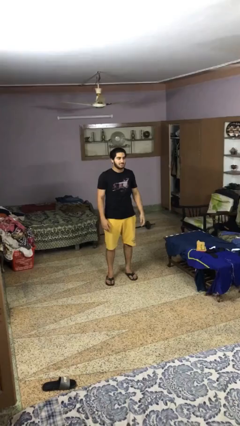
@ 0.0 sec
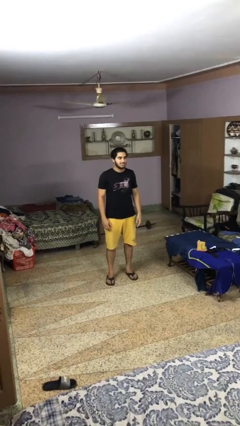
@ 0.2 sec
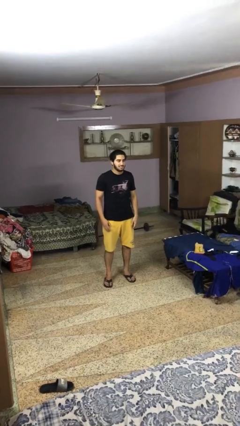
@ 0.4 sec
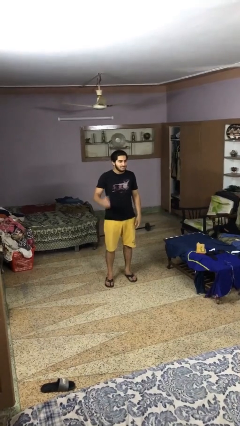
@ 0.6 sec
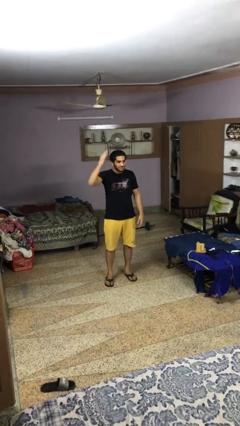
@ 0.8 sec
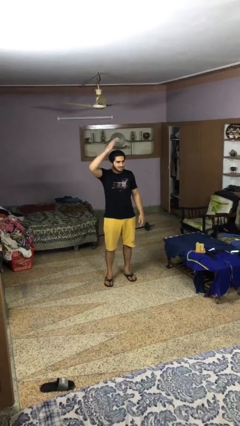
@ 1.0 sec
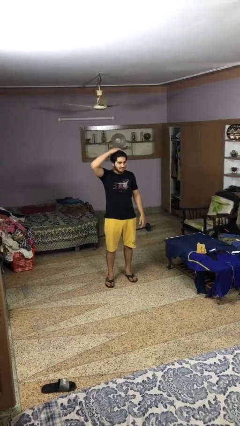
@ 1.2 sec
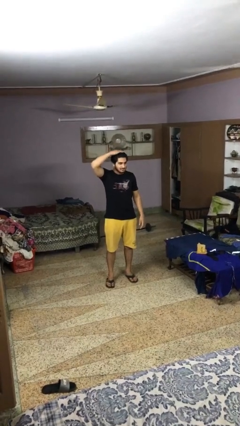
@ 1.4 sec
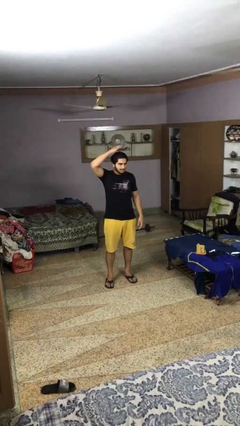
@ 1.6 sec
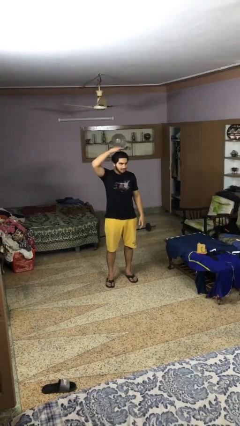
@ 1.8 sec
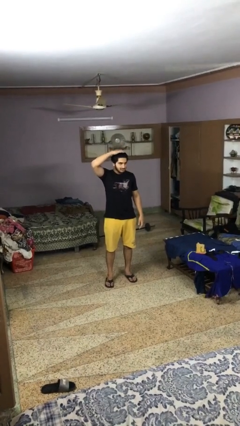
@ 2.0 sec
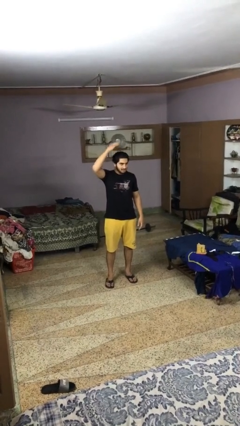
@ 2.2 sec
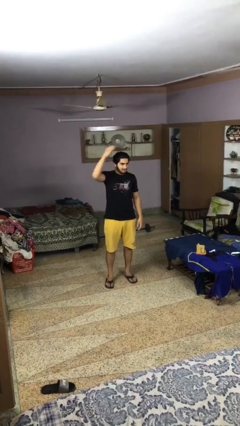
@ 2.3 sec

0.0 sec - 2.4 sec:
person pats head

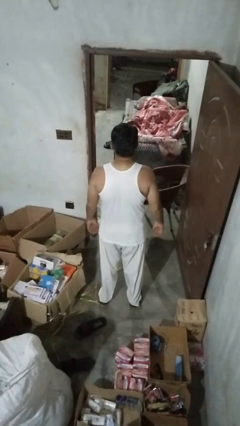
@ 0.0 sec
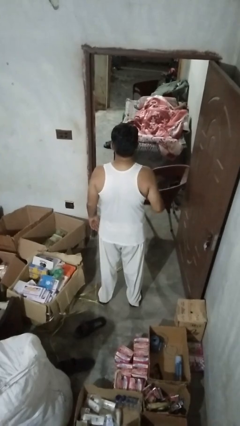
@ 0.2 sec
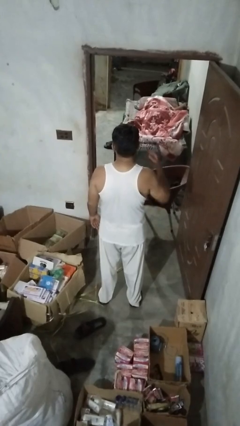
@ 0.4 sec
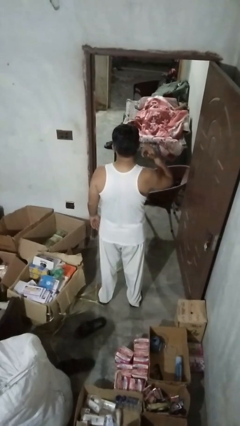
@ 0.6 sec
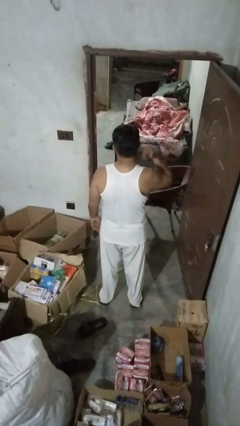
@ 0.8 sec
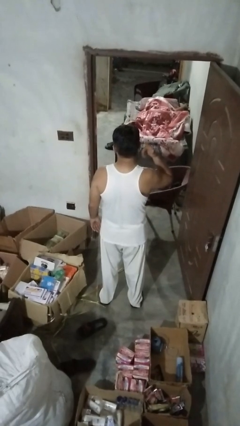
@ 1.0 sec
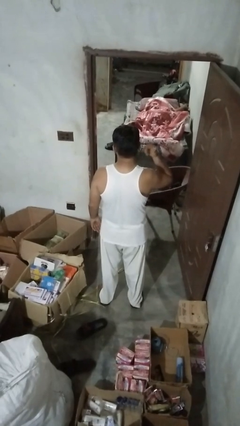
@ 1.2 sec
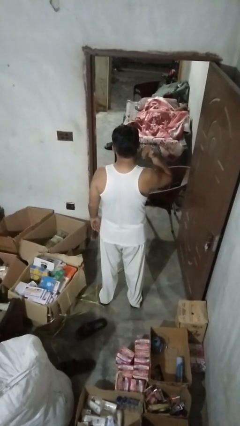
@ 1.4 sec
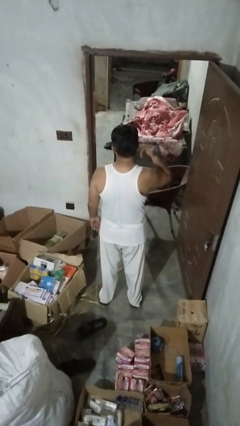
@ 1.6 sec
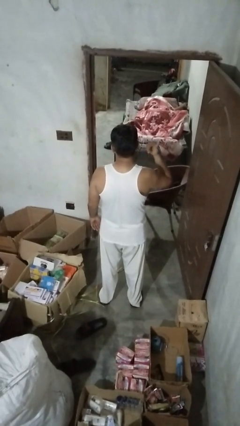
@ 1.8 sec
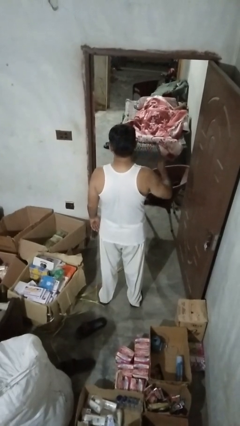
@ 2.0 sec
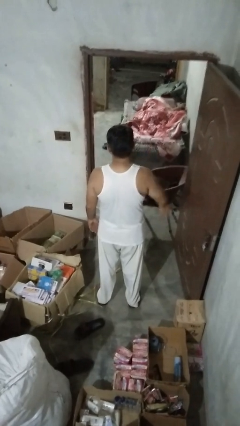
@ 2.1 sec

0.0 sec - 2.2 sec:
person touches earlobe

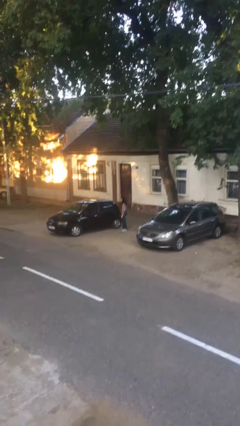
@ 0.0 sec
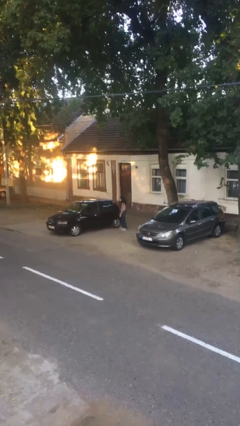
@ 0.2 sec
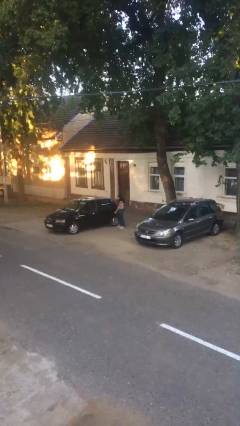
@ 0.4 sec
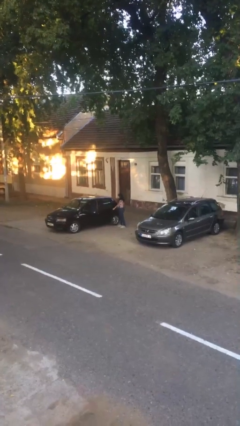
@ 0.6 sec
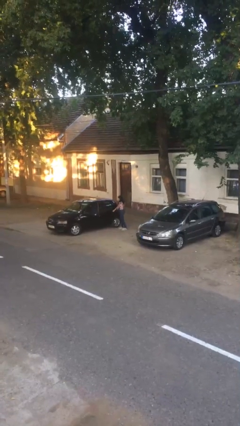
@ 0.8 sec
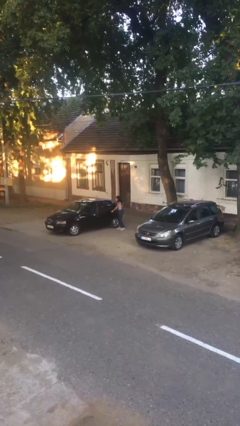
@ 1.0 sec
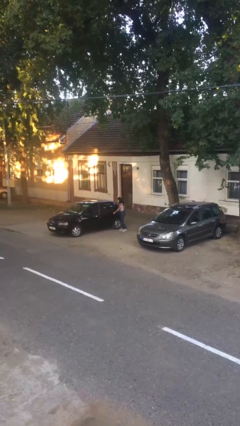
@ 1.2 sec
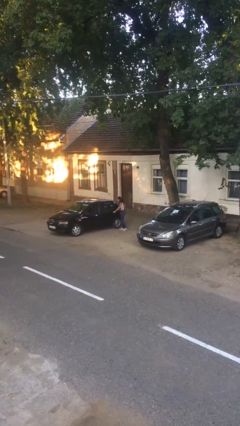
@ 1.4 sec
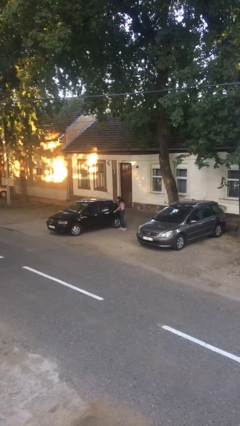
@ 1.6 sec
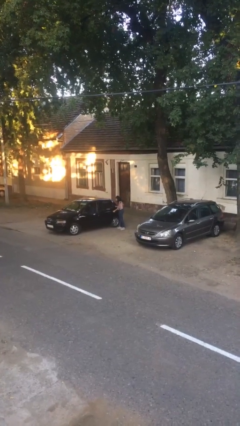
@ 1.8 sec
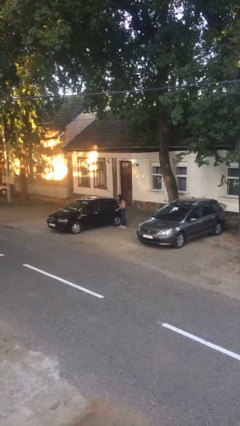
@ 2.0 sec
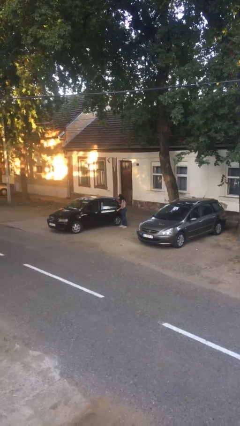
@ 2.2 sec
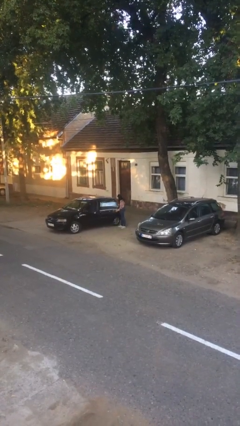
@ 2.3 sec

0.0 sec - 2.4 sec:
person opens car door

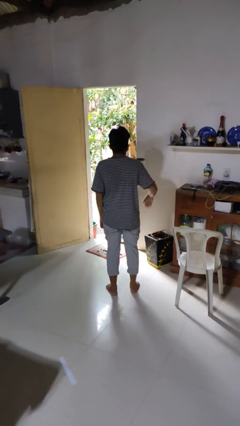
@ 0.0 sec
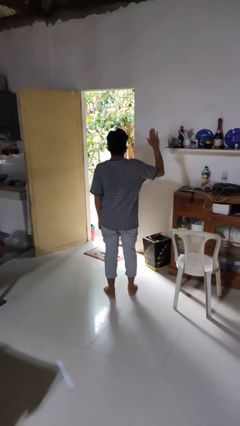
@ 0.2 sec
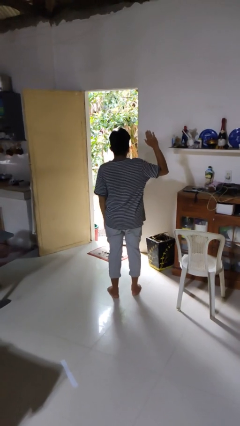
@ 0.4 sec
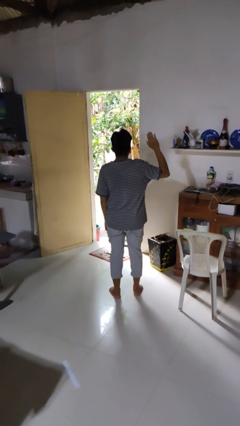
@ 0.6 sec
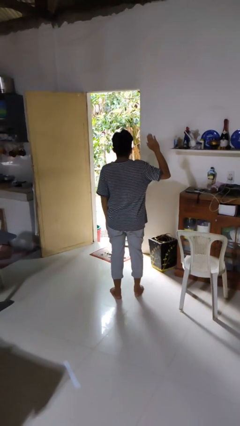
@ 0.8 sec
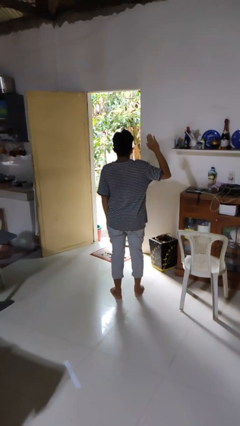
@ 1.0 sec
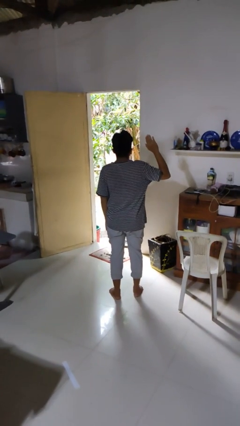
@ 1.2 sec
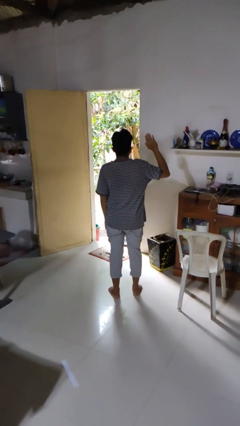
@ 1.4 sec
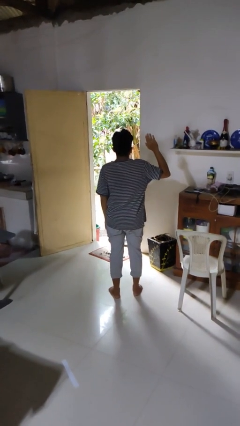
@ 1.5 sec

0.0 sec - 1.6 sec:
person gestures number five

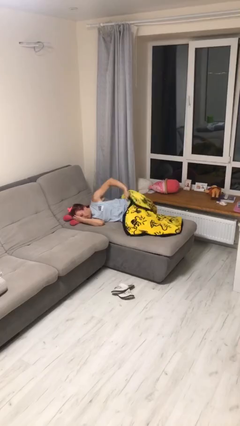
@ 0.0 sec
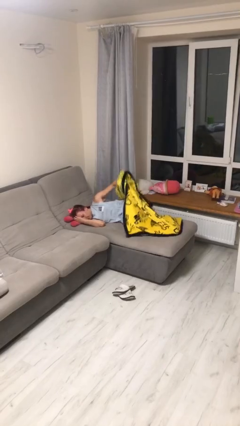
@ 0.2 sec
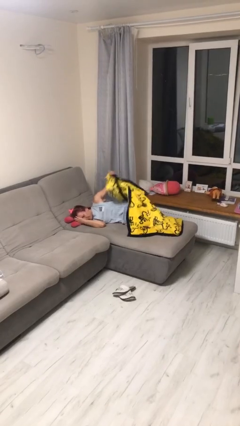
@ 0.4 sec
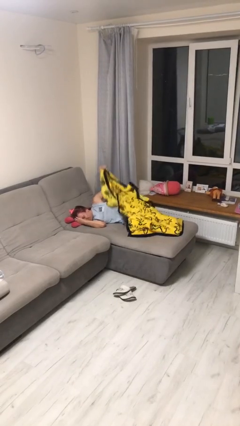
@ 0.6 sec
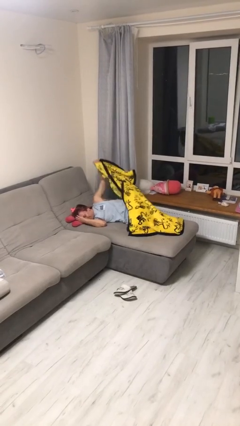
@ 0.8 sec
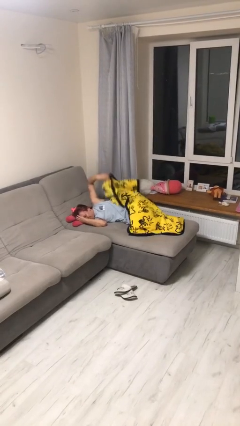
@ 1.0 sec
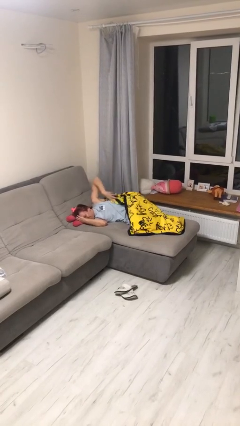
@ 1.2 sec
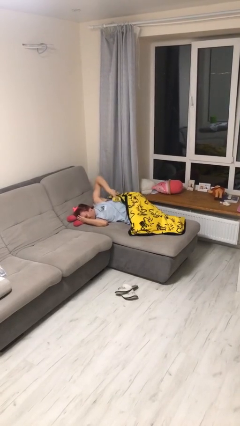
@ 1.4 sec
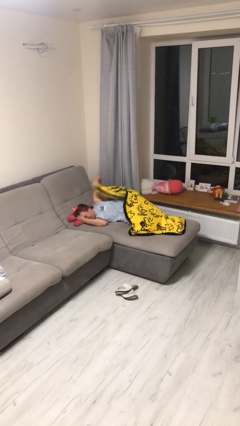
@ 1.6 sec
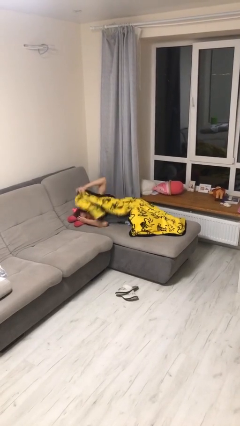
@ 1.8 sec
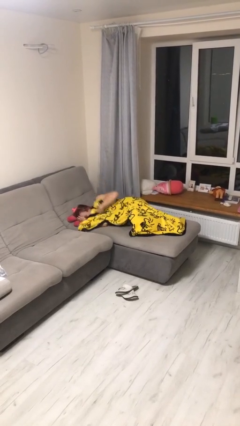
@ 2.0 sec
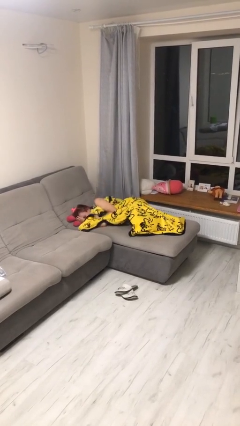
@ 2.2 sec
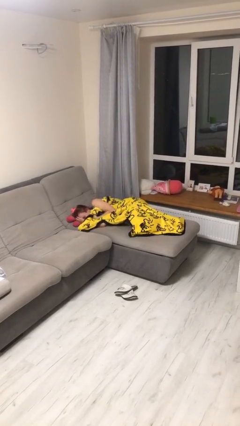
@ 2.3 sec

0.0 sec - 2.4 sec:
person covers with bedsheets

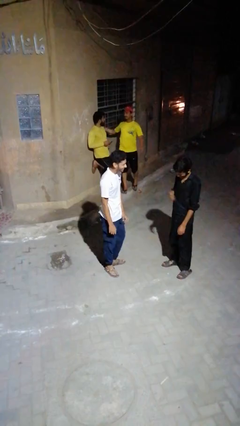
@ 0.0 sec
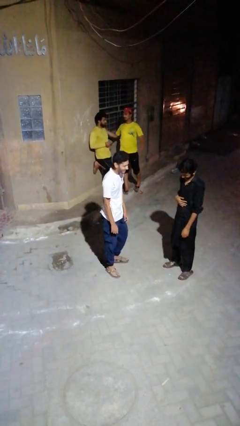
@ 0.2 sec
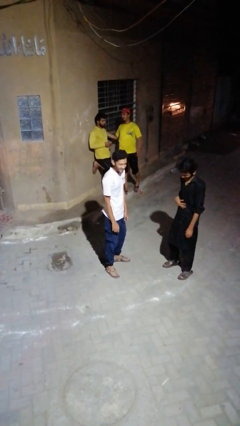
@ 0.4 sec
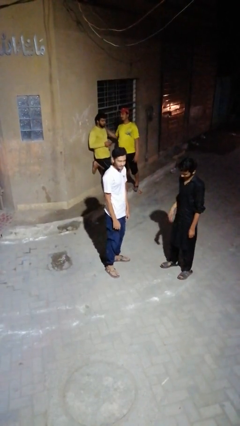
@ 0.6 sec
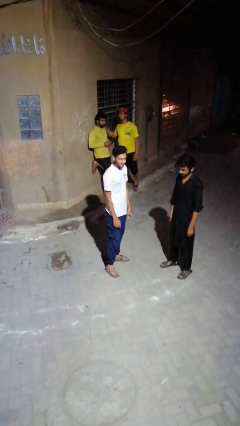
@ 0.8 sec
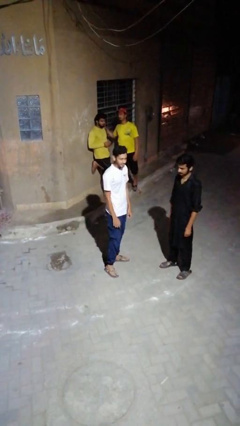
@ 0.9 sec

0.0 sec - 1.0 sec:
person laughs with person

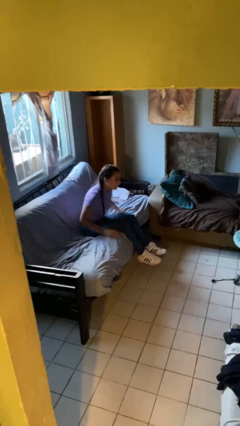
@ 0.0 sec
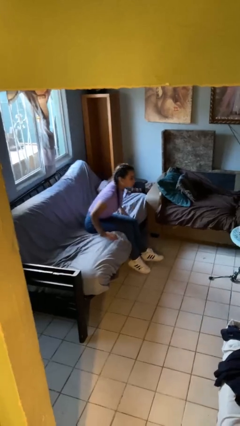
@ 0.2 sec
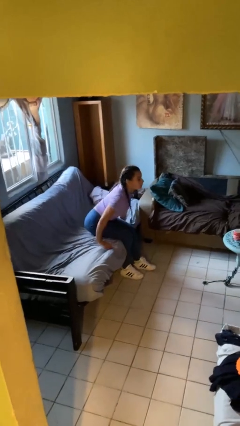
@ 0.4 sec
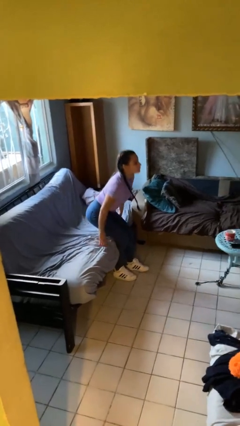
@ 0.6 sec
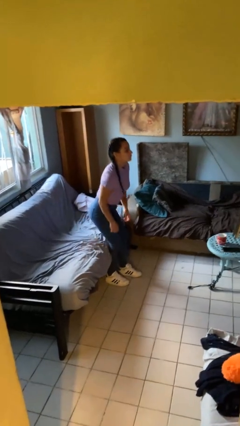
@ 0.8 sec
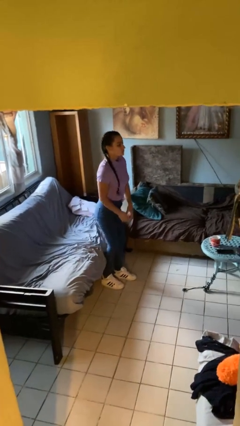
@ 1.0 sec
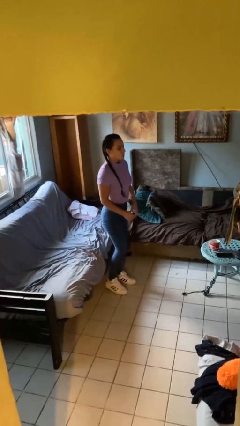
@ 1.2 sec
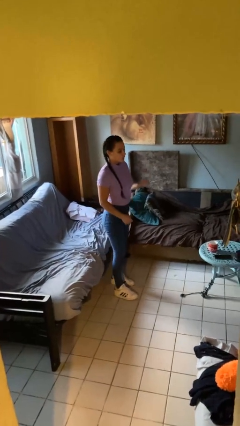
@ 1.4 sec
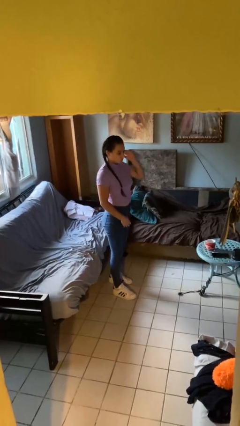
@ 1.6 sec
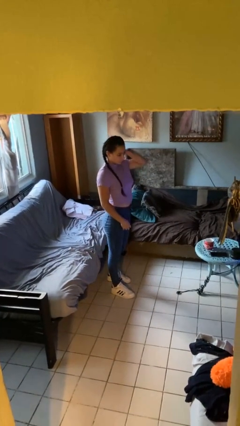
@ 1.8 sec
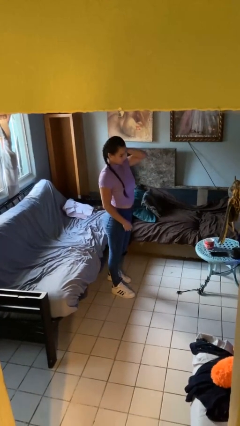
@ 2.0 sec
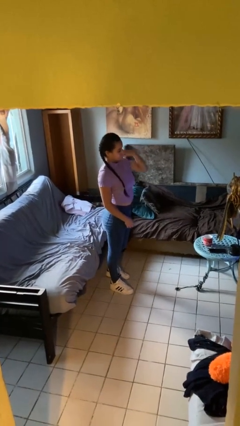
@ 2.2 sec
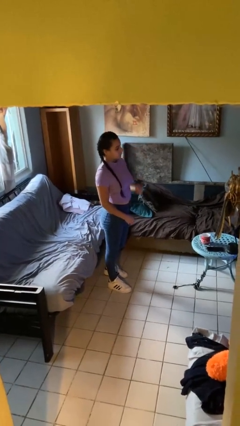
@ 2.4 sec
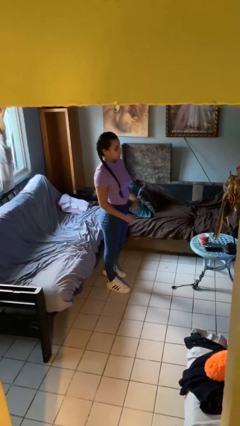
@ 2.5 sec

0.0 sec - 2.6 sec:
person stands up

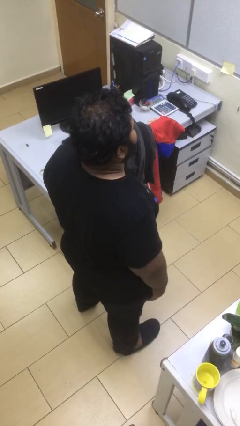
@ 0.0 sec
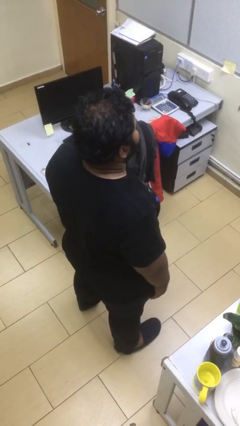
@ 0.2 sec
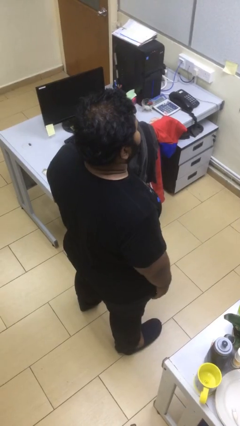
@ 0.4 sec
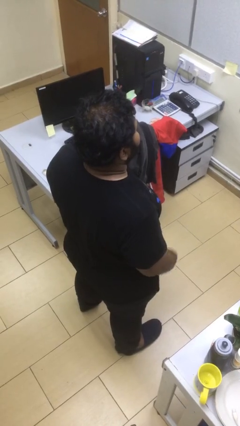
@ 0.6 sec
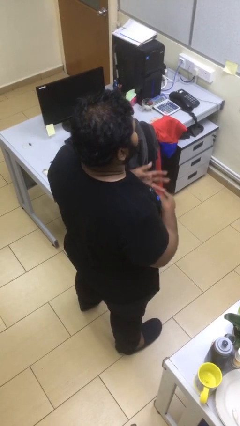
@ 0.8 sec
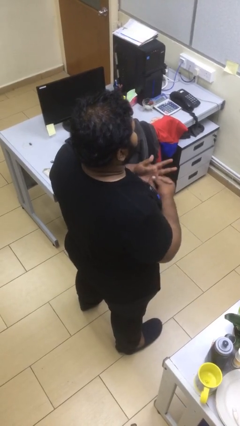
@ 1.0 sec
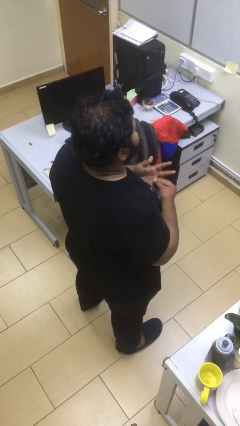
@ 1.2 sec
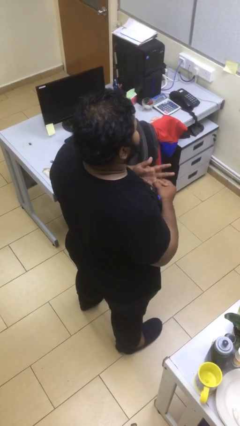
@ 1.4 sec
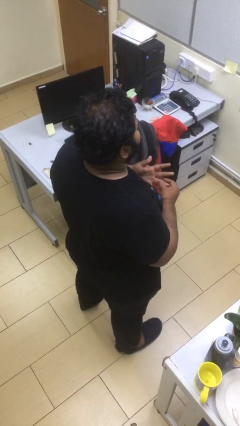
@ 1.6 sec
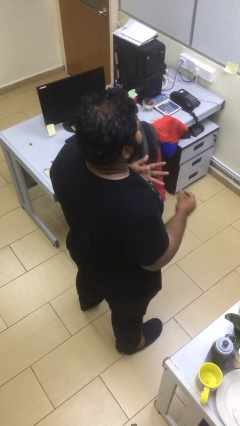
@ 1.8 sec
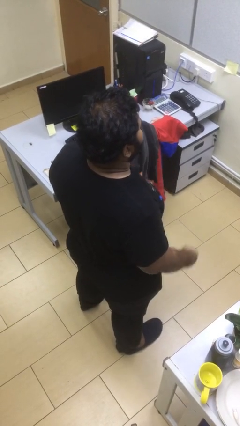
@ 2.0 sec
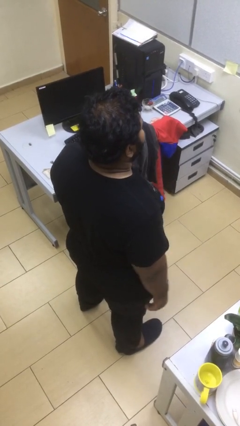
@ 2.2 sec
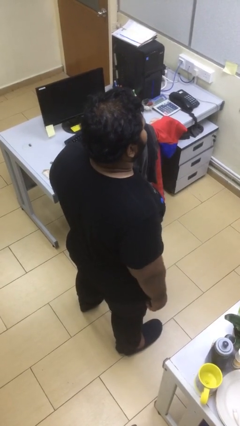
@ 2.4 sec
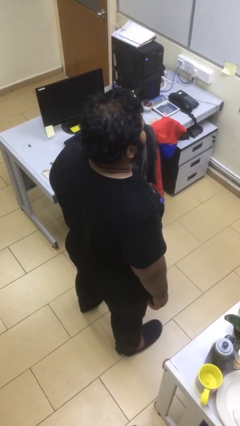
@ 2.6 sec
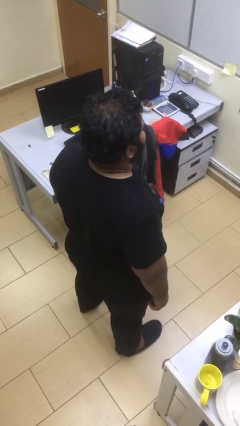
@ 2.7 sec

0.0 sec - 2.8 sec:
person takes off ring
